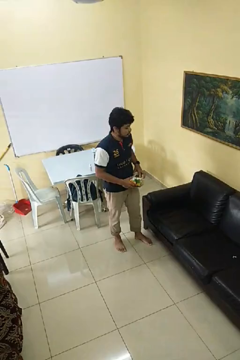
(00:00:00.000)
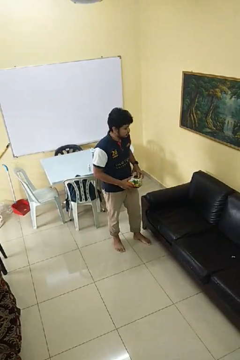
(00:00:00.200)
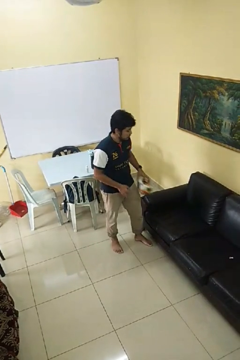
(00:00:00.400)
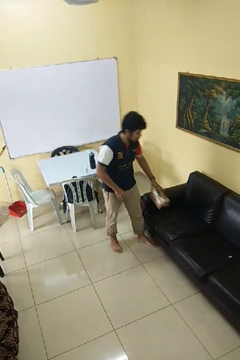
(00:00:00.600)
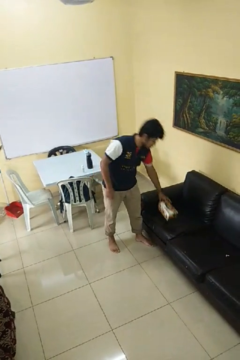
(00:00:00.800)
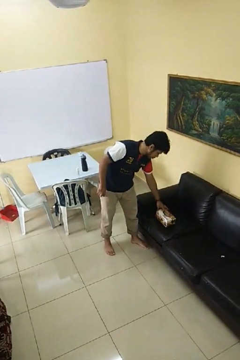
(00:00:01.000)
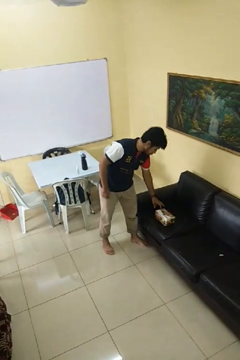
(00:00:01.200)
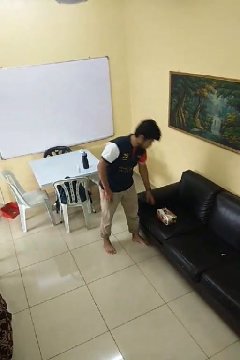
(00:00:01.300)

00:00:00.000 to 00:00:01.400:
person puts down object on couch

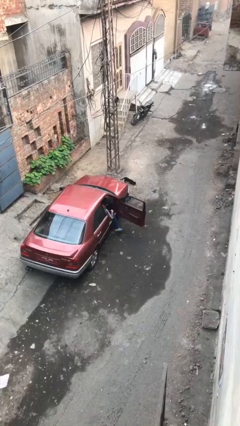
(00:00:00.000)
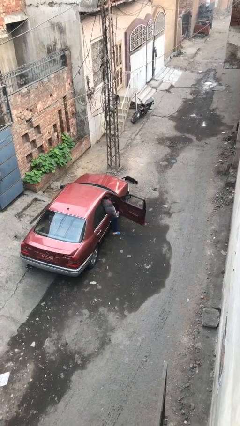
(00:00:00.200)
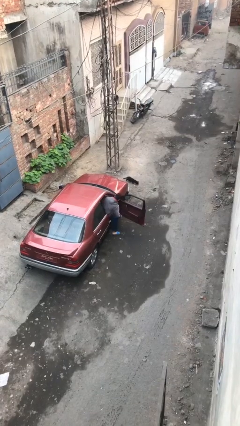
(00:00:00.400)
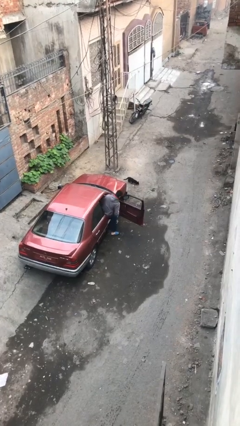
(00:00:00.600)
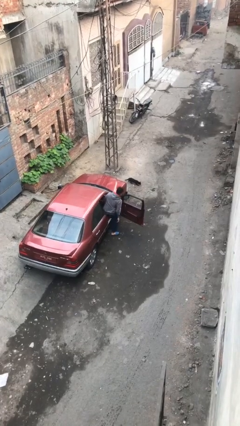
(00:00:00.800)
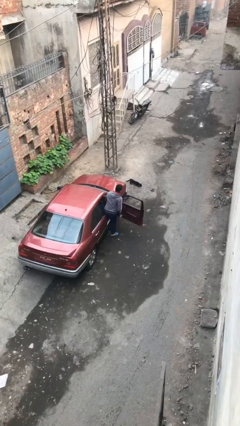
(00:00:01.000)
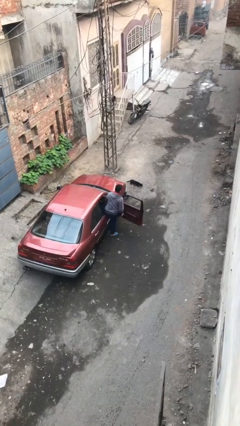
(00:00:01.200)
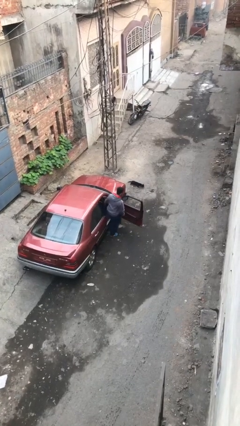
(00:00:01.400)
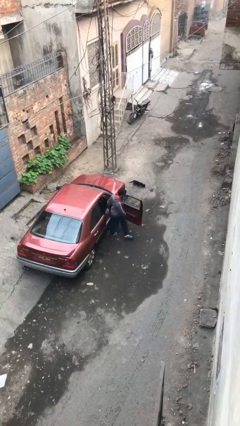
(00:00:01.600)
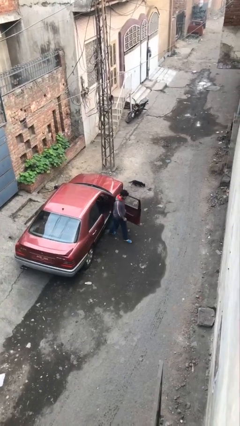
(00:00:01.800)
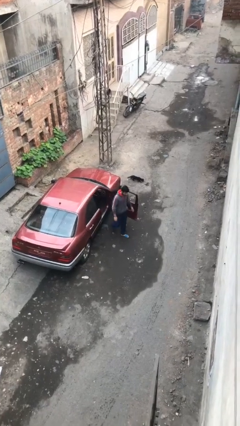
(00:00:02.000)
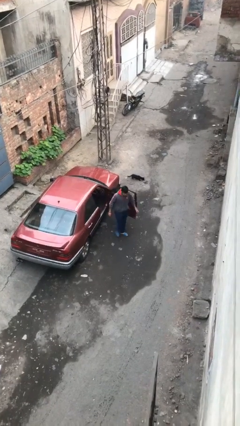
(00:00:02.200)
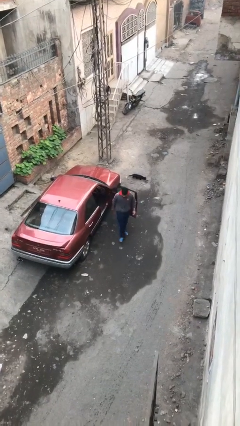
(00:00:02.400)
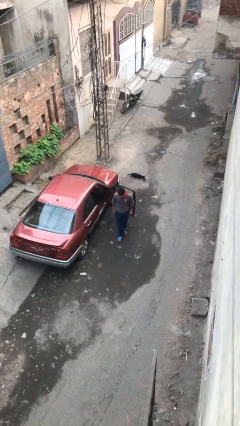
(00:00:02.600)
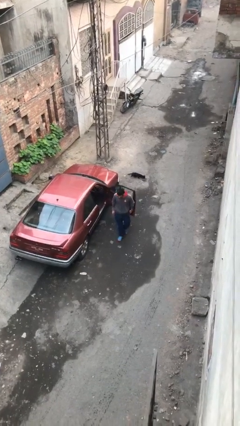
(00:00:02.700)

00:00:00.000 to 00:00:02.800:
person exits car

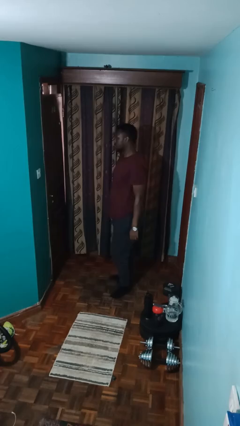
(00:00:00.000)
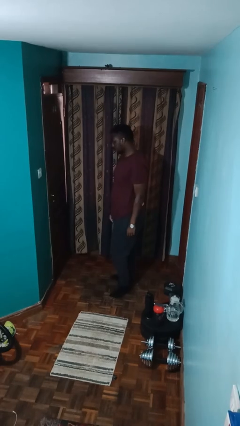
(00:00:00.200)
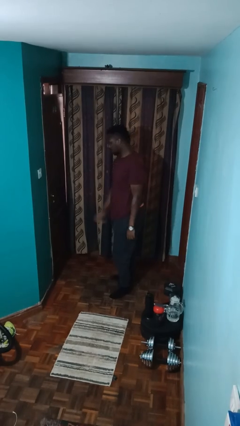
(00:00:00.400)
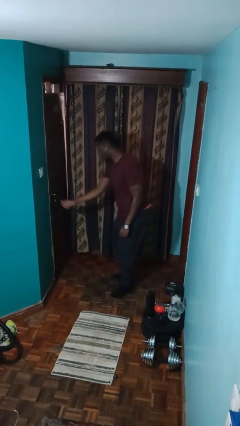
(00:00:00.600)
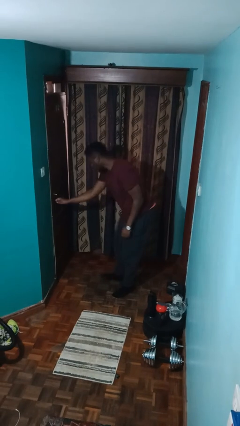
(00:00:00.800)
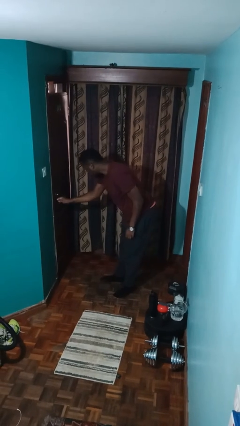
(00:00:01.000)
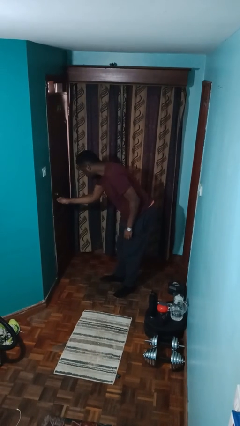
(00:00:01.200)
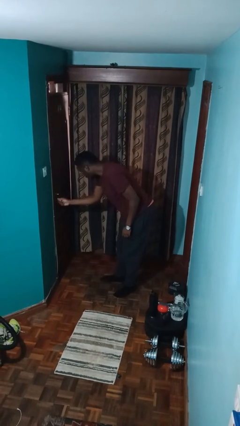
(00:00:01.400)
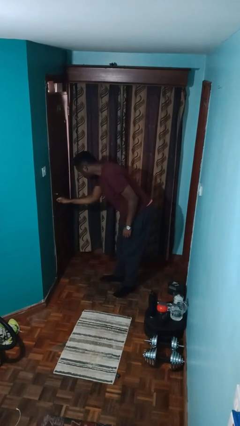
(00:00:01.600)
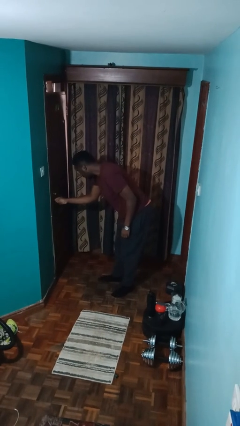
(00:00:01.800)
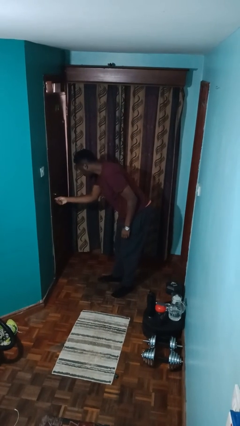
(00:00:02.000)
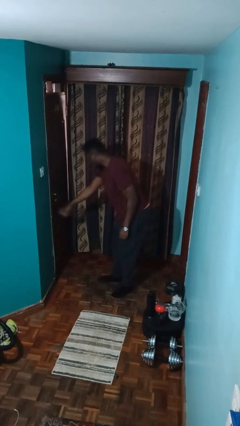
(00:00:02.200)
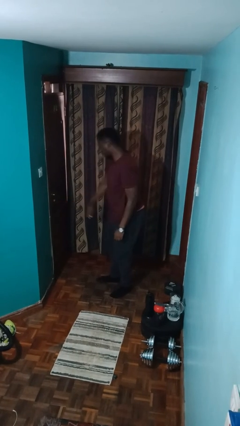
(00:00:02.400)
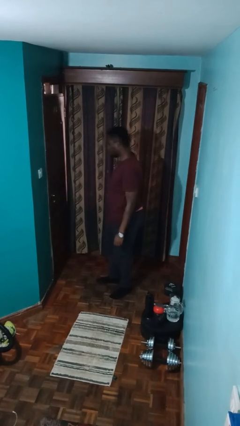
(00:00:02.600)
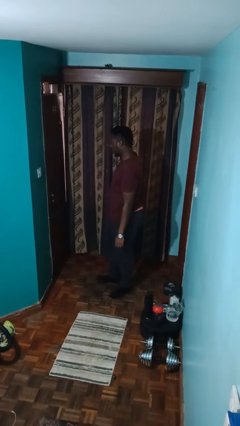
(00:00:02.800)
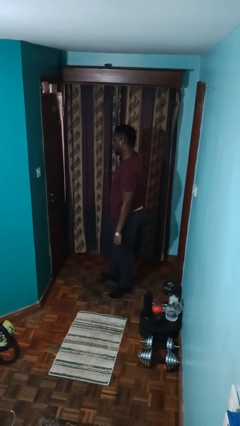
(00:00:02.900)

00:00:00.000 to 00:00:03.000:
person unlocks door with keys

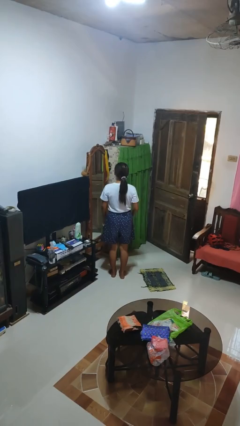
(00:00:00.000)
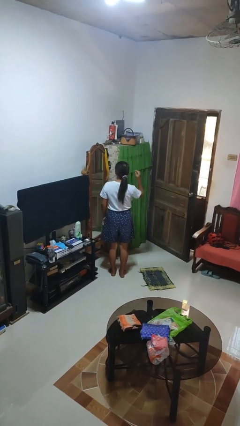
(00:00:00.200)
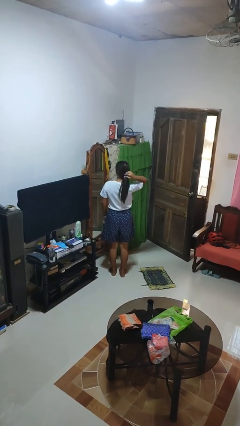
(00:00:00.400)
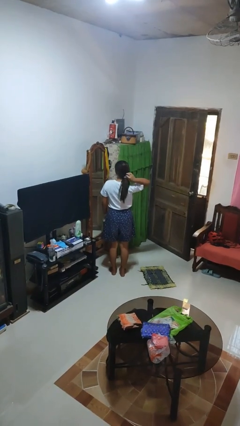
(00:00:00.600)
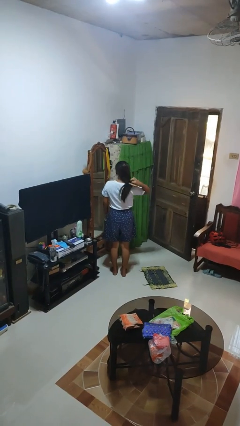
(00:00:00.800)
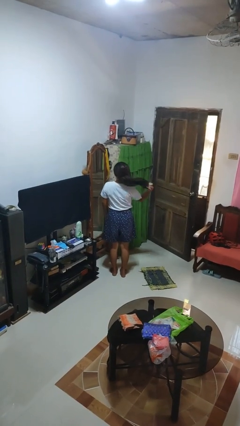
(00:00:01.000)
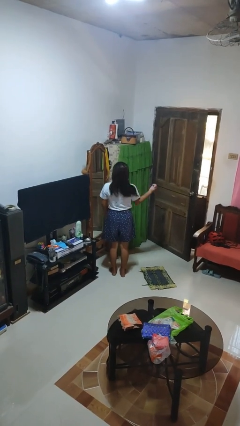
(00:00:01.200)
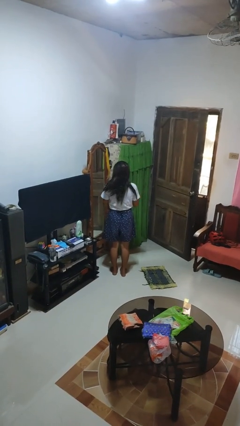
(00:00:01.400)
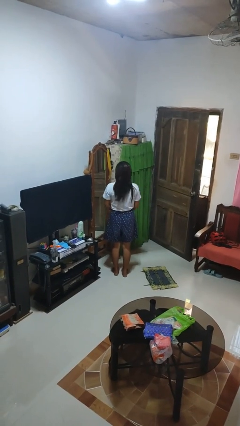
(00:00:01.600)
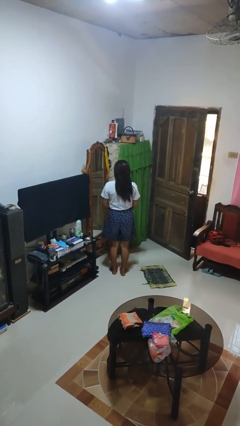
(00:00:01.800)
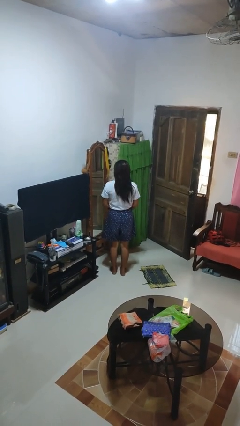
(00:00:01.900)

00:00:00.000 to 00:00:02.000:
person takes off hairtie

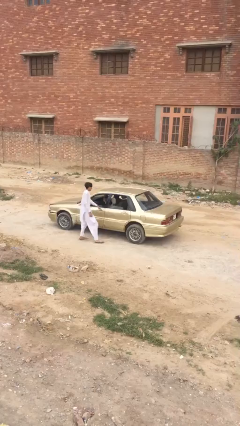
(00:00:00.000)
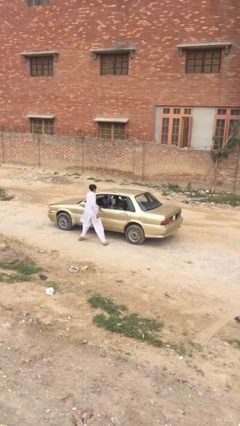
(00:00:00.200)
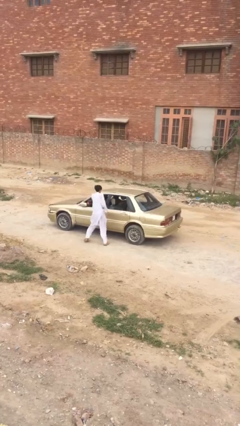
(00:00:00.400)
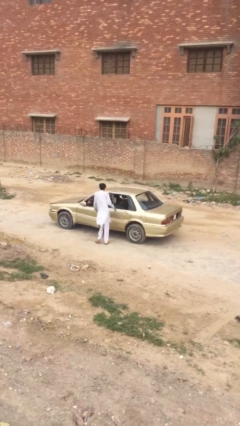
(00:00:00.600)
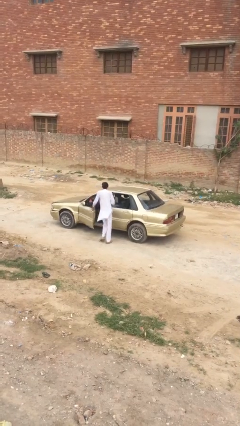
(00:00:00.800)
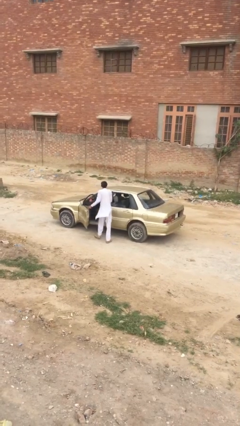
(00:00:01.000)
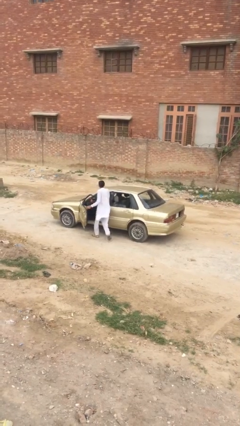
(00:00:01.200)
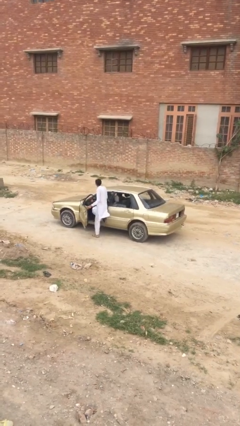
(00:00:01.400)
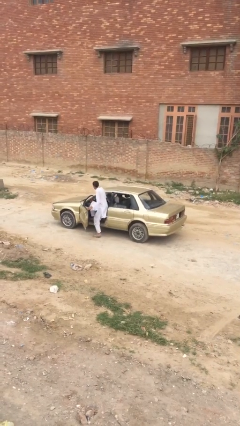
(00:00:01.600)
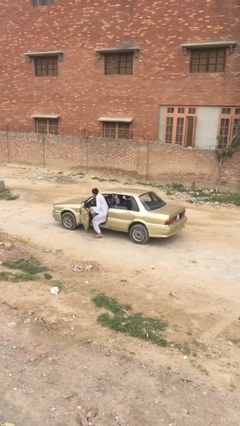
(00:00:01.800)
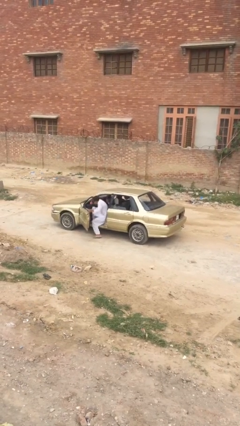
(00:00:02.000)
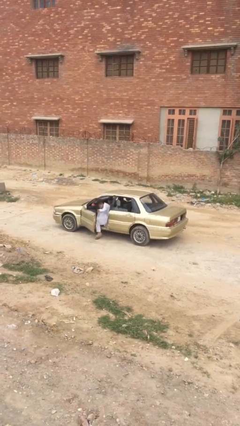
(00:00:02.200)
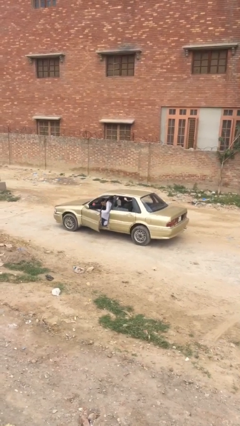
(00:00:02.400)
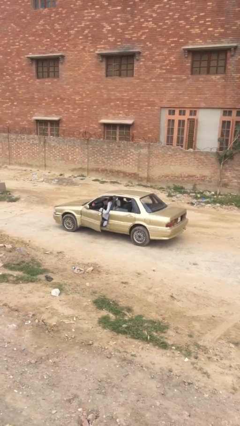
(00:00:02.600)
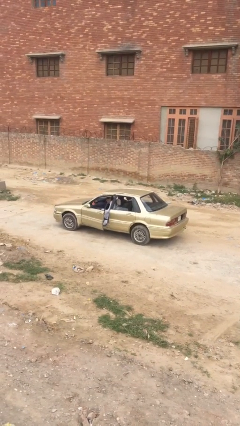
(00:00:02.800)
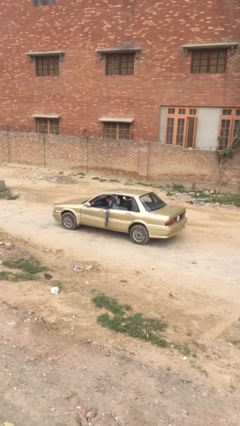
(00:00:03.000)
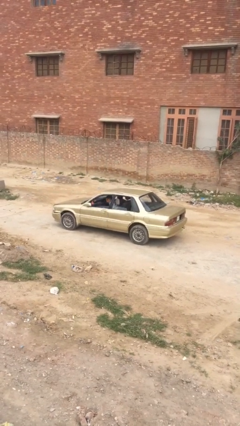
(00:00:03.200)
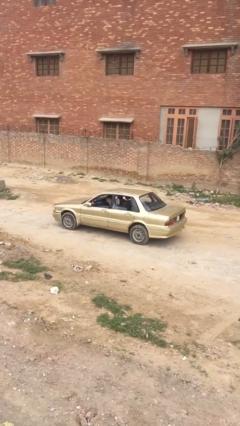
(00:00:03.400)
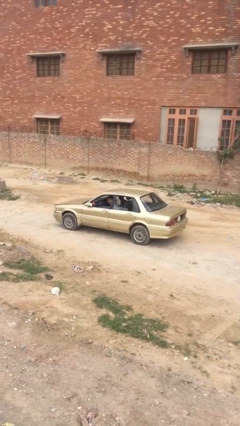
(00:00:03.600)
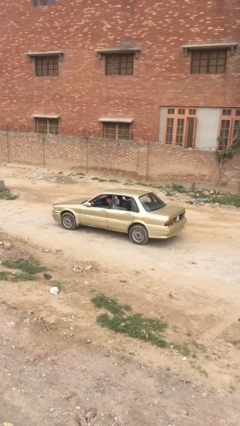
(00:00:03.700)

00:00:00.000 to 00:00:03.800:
car picks up person

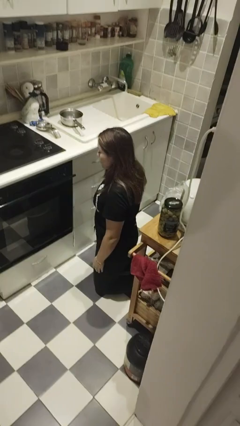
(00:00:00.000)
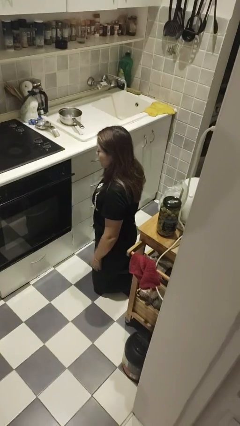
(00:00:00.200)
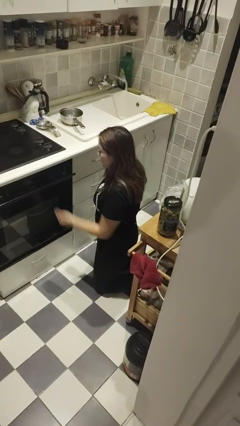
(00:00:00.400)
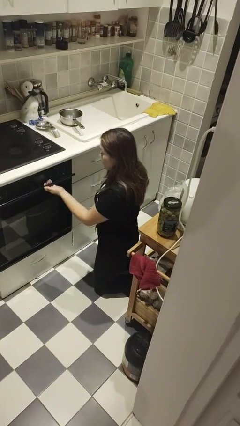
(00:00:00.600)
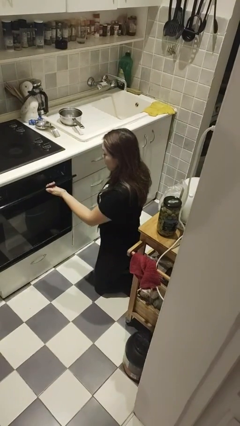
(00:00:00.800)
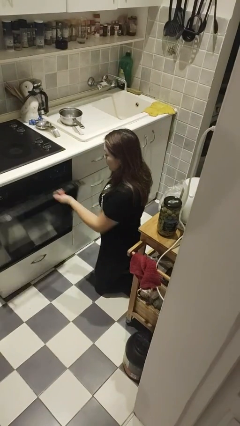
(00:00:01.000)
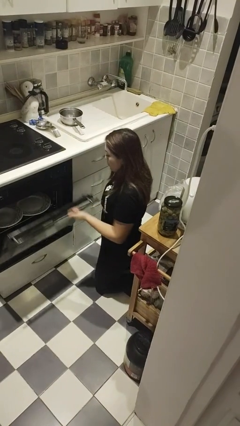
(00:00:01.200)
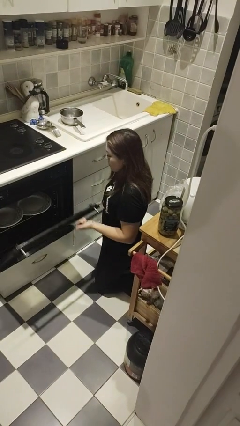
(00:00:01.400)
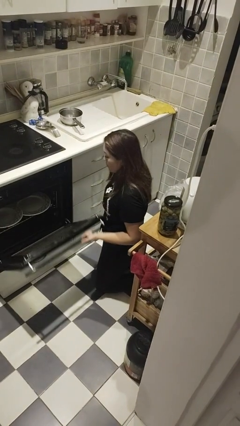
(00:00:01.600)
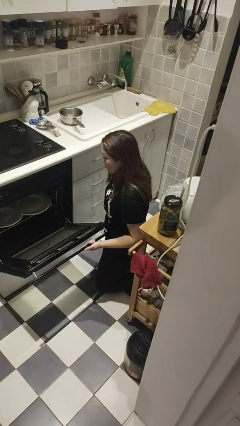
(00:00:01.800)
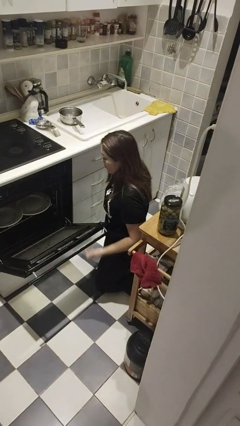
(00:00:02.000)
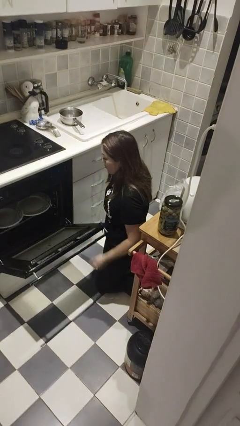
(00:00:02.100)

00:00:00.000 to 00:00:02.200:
person opens dishwasher

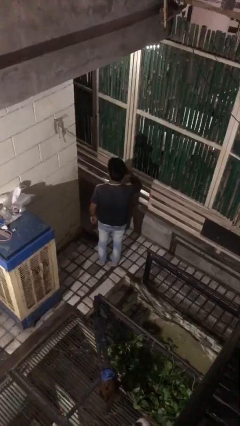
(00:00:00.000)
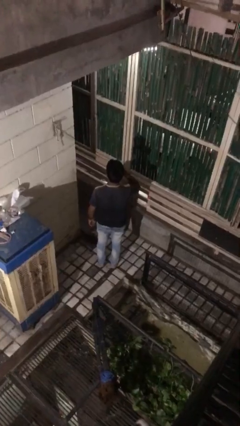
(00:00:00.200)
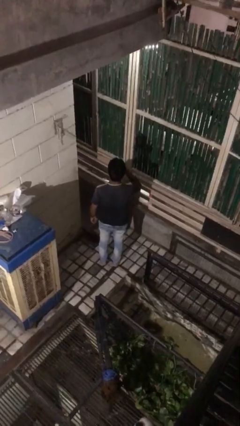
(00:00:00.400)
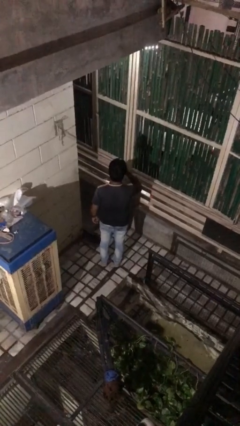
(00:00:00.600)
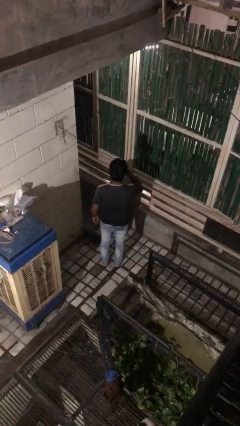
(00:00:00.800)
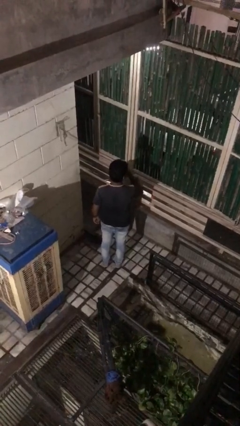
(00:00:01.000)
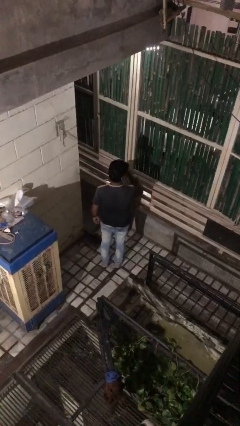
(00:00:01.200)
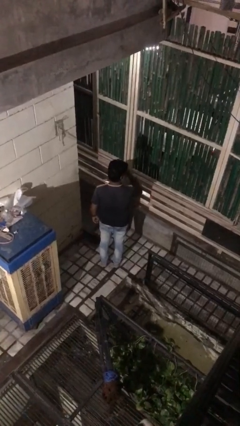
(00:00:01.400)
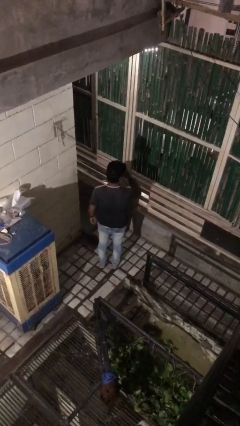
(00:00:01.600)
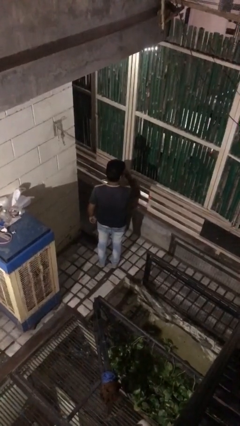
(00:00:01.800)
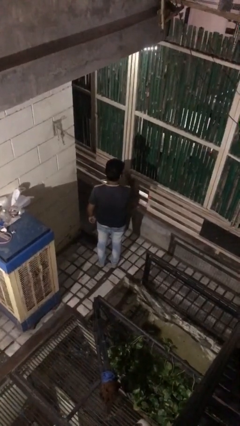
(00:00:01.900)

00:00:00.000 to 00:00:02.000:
person brushes teeth
